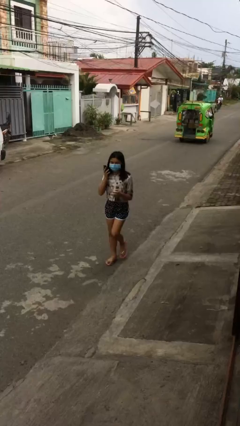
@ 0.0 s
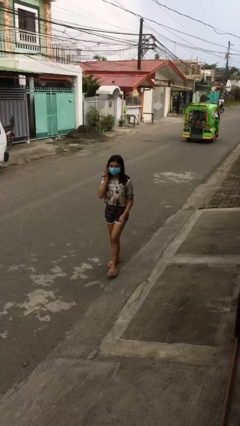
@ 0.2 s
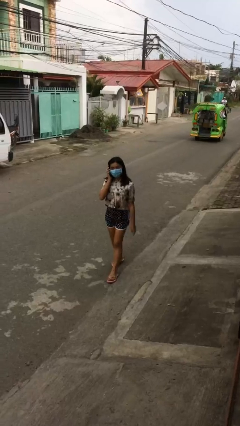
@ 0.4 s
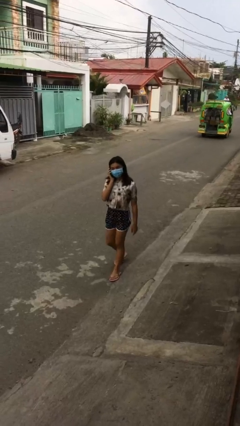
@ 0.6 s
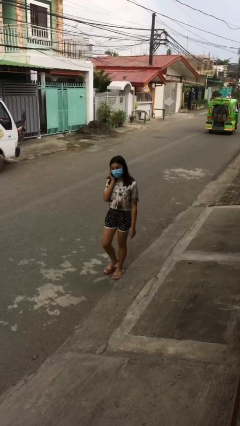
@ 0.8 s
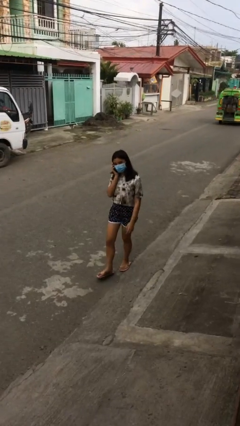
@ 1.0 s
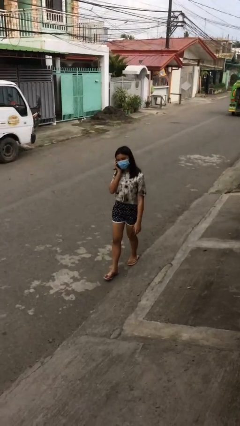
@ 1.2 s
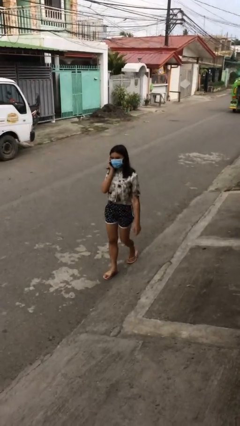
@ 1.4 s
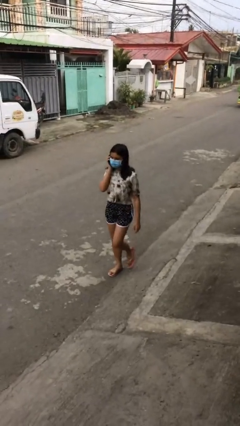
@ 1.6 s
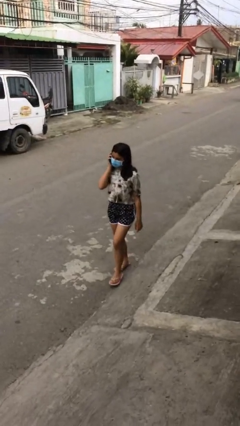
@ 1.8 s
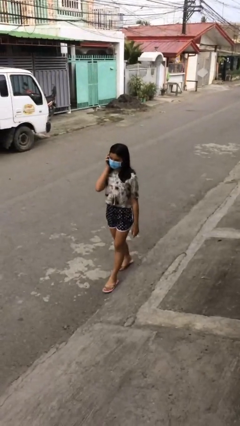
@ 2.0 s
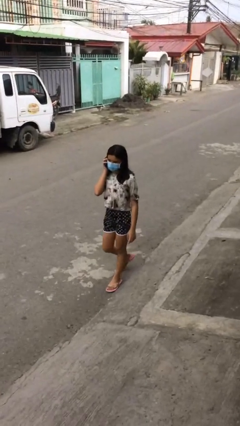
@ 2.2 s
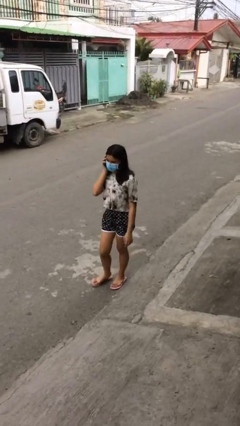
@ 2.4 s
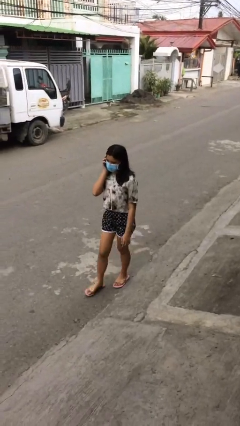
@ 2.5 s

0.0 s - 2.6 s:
person talks on phone

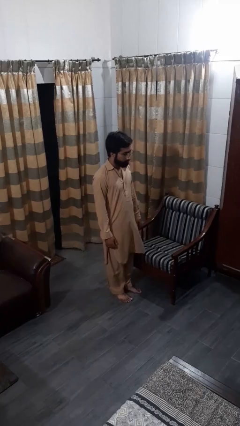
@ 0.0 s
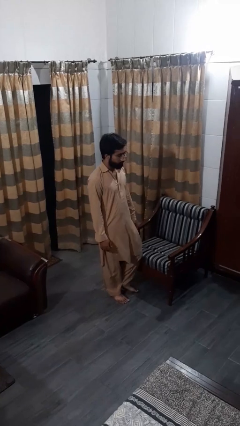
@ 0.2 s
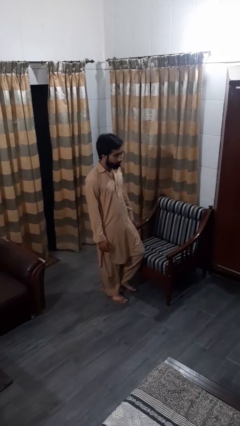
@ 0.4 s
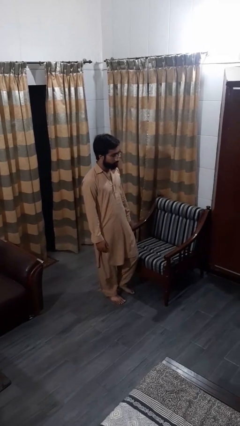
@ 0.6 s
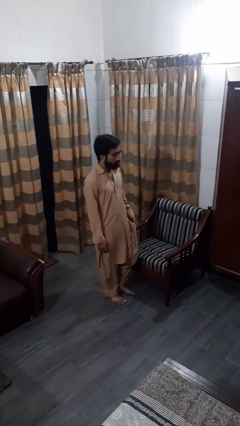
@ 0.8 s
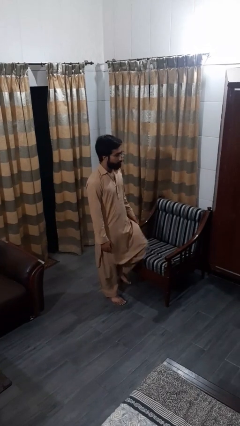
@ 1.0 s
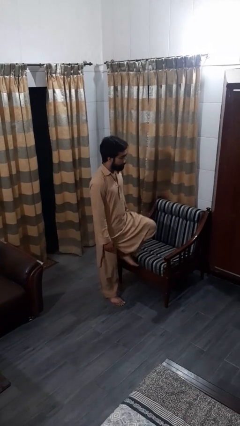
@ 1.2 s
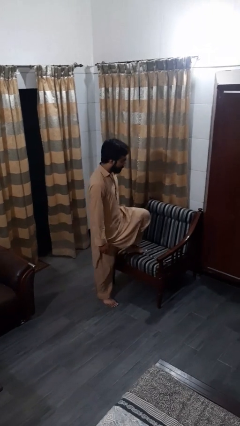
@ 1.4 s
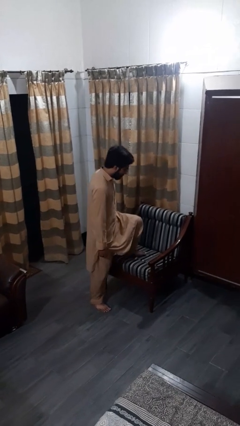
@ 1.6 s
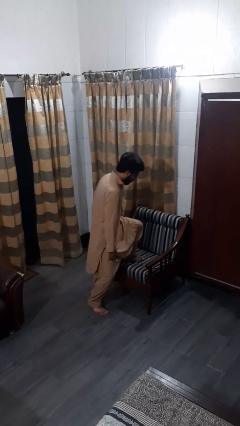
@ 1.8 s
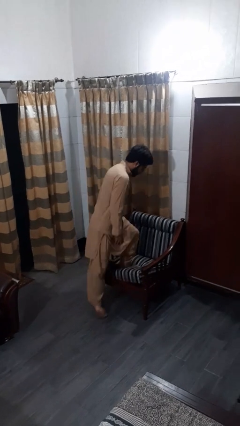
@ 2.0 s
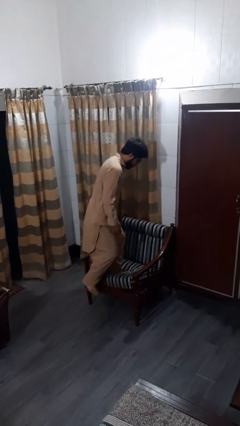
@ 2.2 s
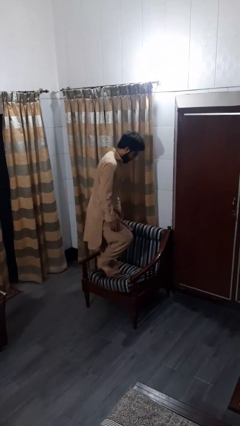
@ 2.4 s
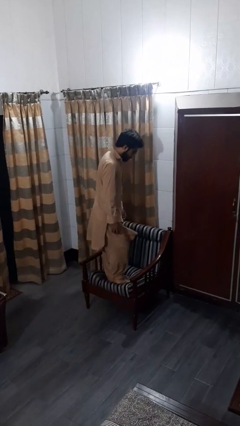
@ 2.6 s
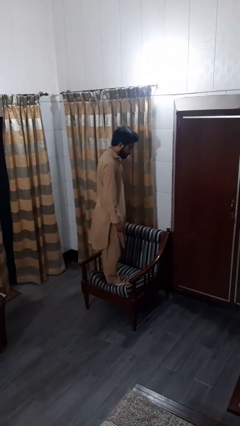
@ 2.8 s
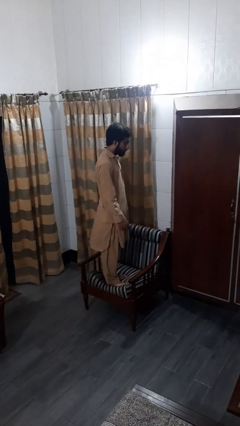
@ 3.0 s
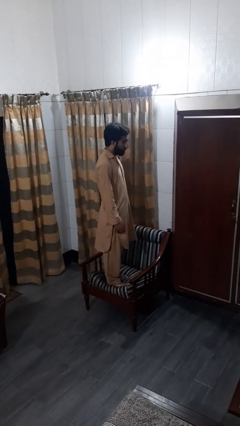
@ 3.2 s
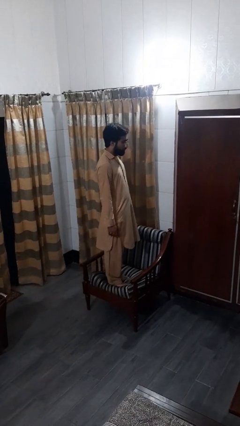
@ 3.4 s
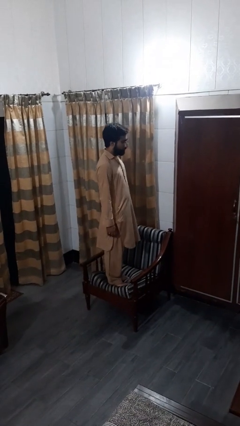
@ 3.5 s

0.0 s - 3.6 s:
person climbs on chair

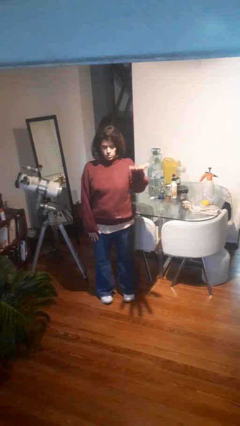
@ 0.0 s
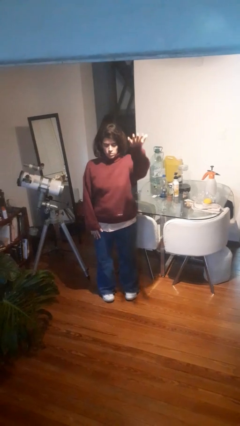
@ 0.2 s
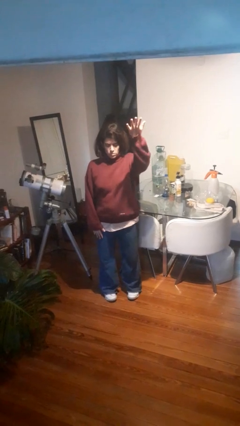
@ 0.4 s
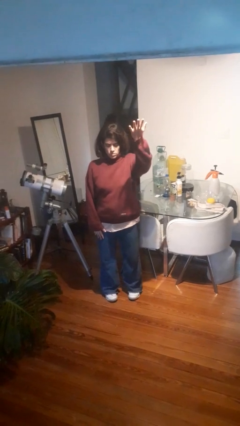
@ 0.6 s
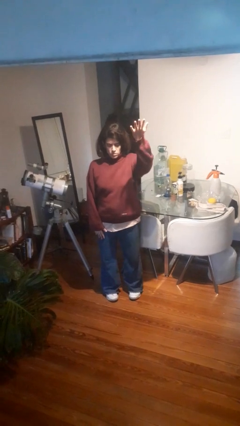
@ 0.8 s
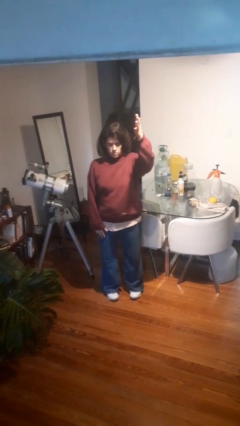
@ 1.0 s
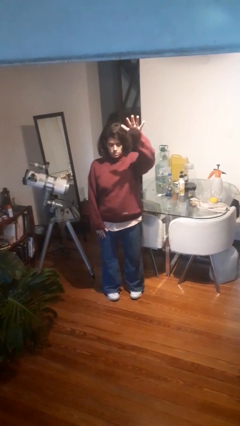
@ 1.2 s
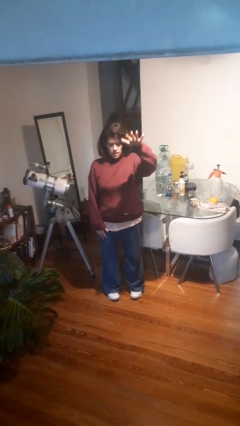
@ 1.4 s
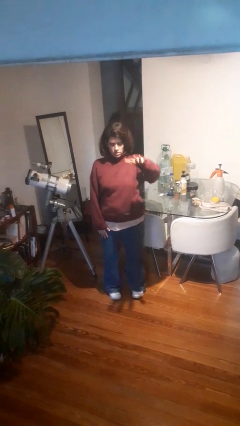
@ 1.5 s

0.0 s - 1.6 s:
person gestures swipe up

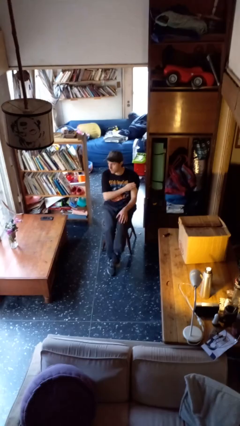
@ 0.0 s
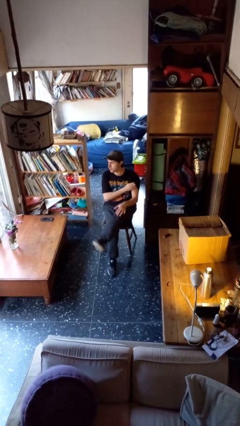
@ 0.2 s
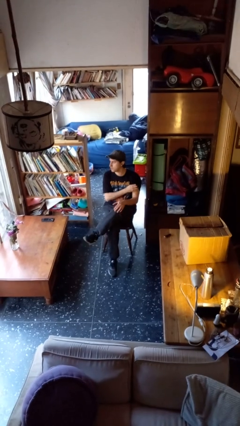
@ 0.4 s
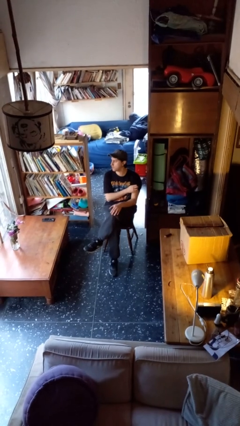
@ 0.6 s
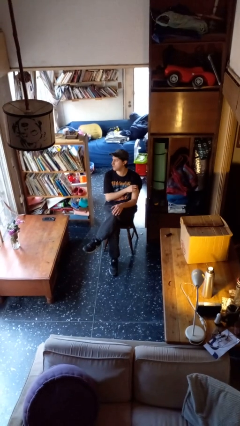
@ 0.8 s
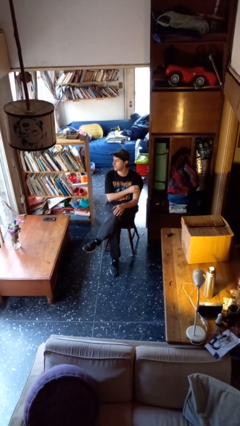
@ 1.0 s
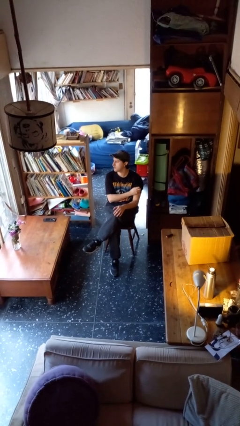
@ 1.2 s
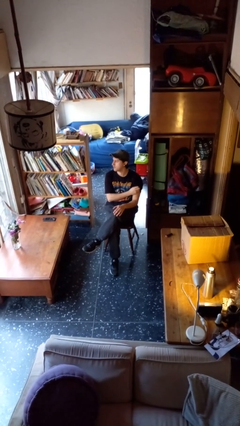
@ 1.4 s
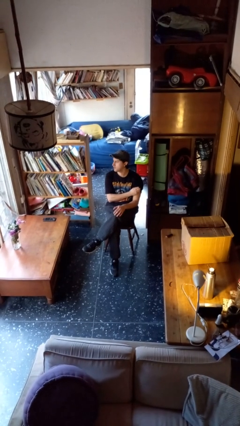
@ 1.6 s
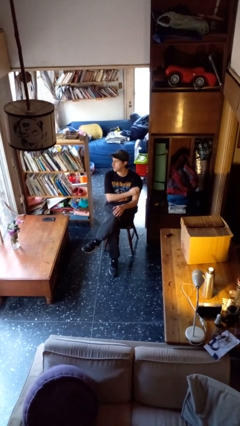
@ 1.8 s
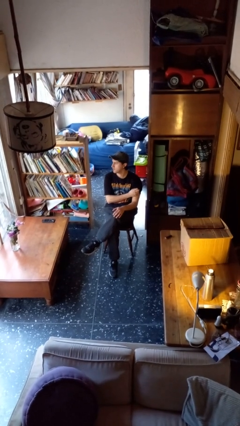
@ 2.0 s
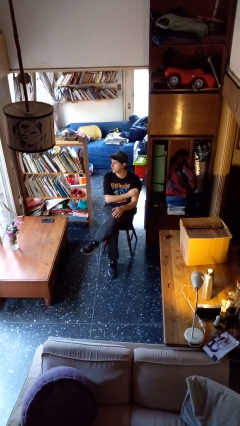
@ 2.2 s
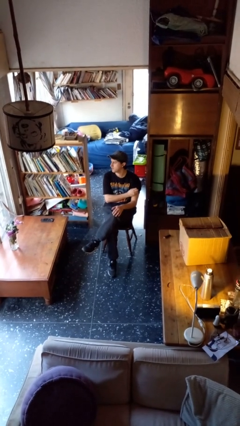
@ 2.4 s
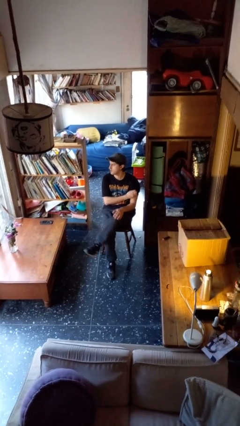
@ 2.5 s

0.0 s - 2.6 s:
person crosses legs

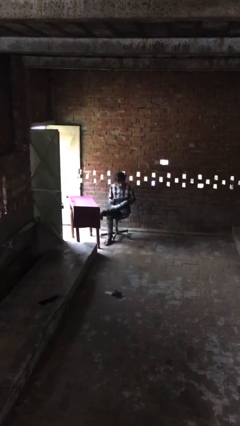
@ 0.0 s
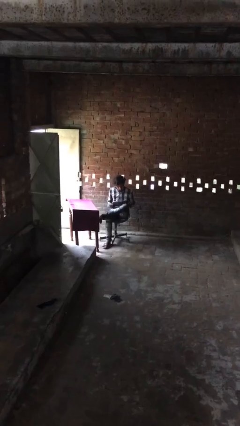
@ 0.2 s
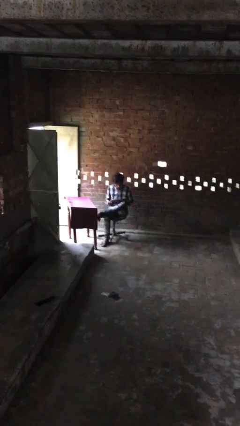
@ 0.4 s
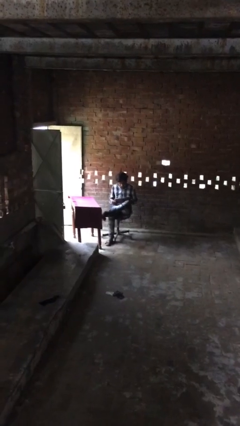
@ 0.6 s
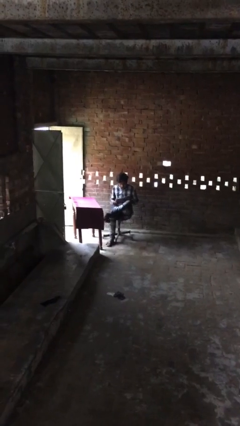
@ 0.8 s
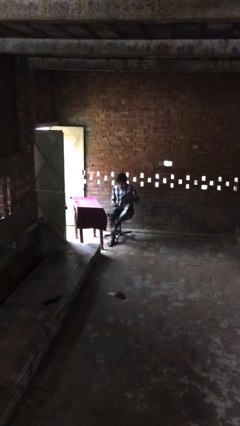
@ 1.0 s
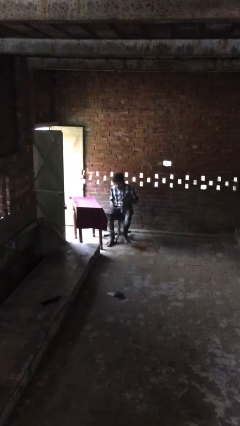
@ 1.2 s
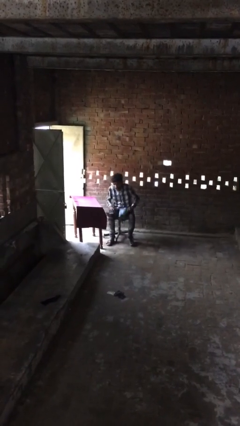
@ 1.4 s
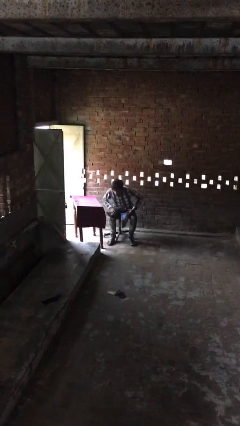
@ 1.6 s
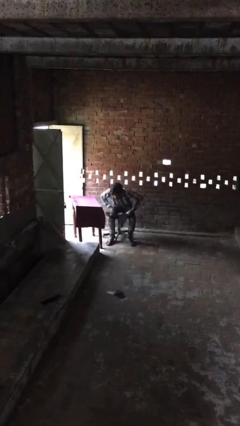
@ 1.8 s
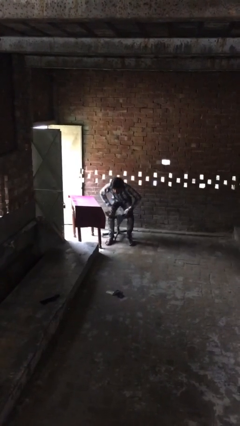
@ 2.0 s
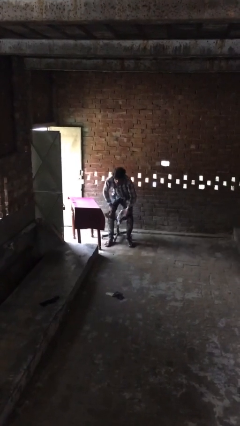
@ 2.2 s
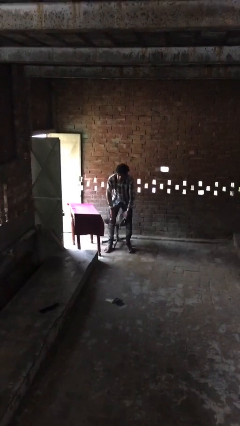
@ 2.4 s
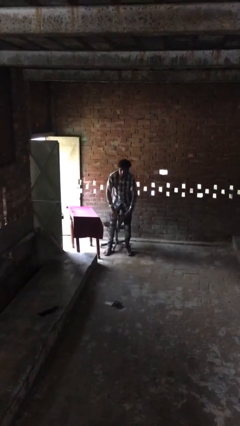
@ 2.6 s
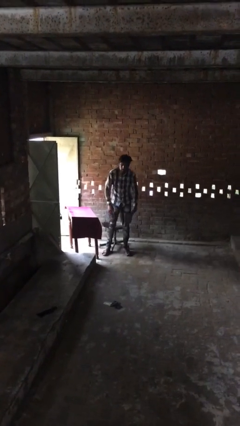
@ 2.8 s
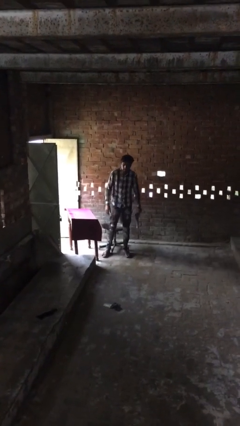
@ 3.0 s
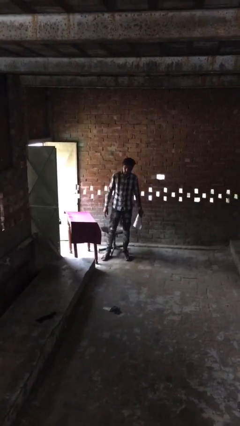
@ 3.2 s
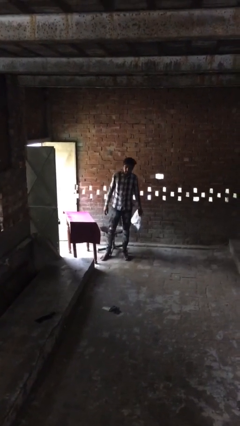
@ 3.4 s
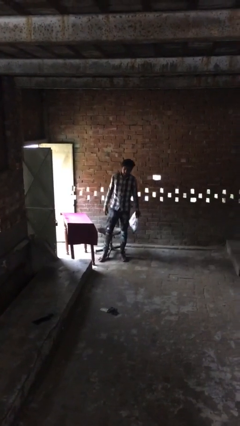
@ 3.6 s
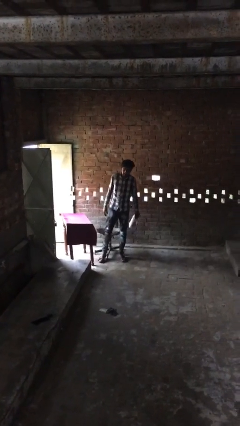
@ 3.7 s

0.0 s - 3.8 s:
person stands up

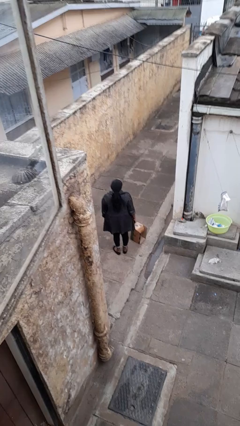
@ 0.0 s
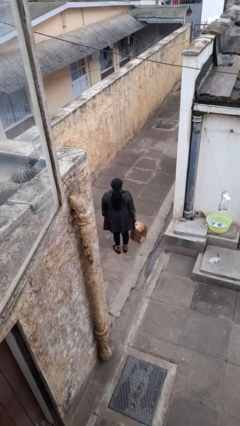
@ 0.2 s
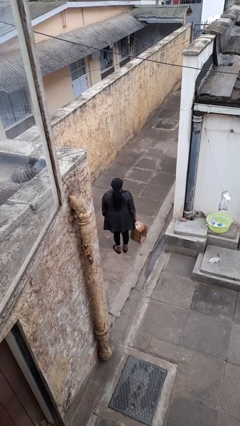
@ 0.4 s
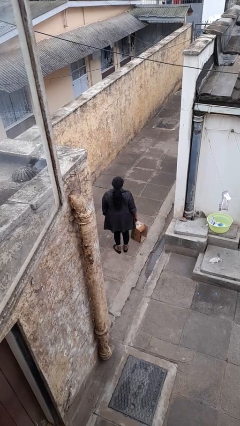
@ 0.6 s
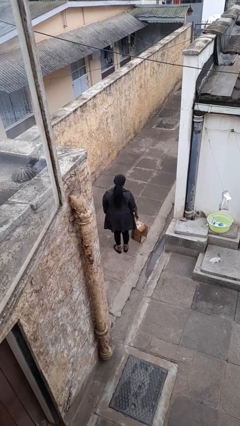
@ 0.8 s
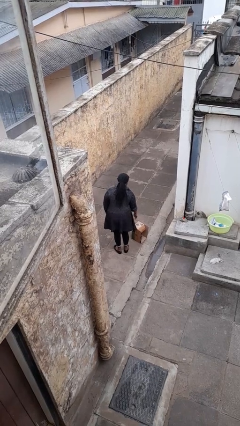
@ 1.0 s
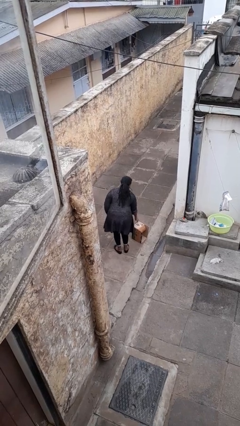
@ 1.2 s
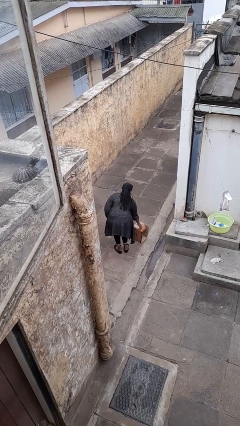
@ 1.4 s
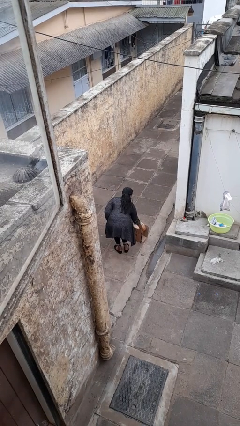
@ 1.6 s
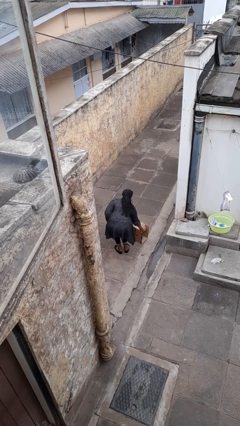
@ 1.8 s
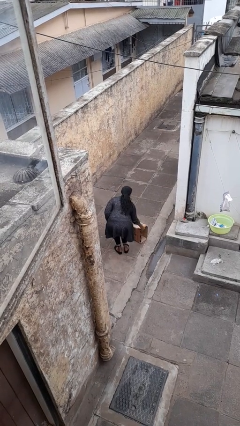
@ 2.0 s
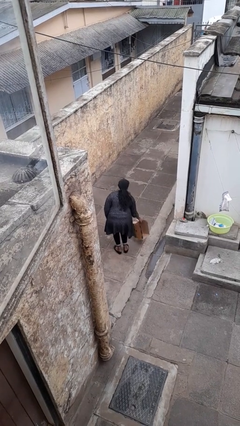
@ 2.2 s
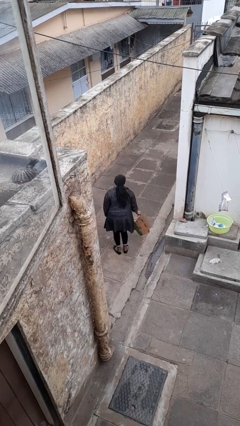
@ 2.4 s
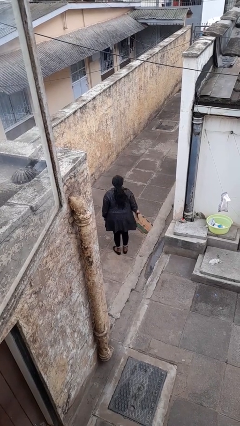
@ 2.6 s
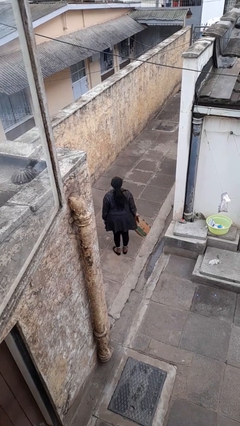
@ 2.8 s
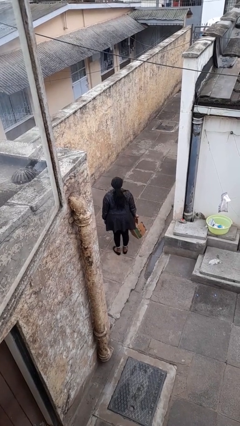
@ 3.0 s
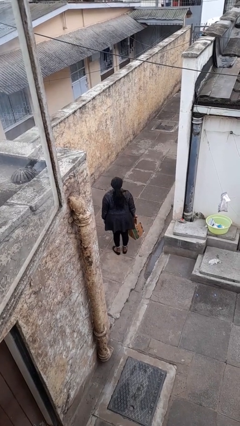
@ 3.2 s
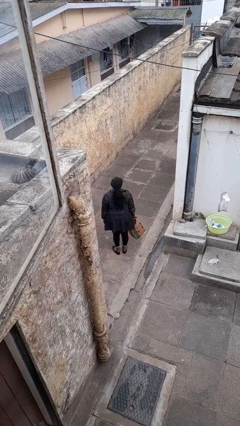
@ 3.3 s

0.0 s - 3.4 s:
person picks up object from floor
